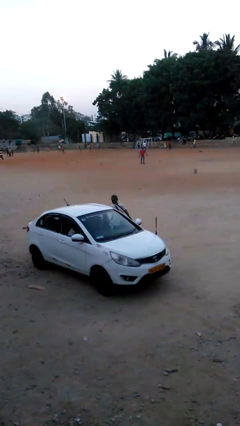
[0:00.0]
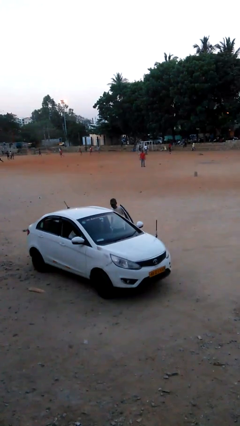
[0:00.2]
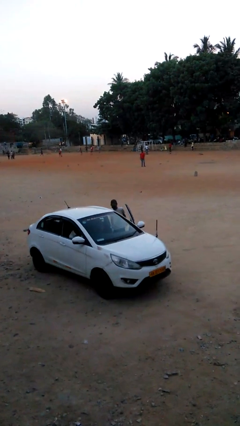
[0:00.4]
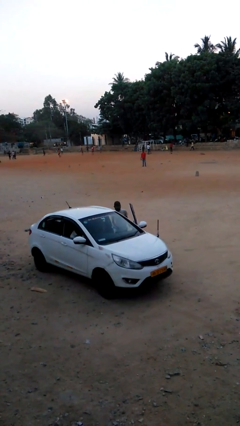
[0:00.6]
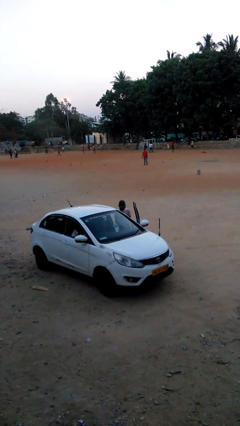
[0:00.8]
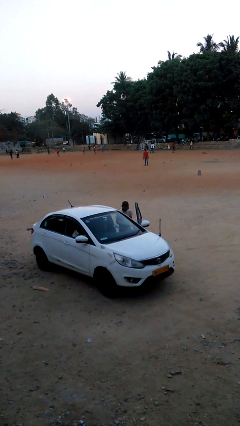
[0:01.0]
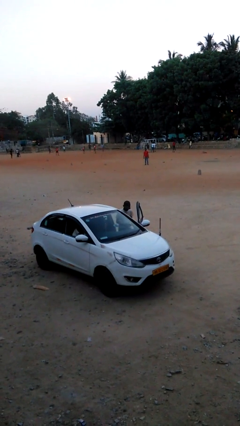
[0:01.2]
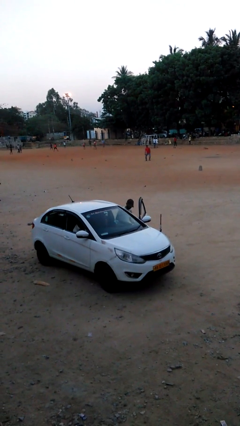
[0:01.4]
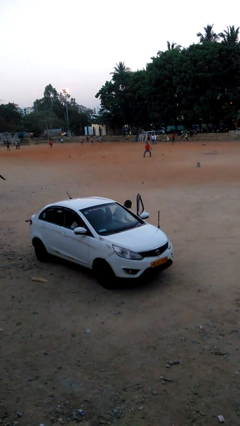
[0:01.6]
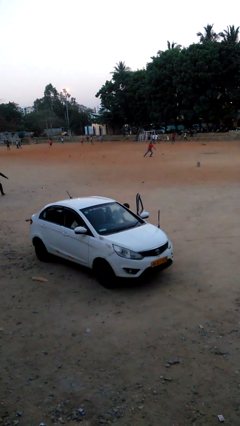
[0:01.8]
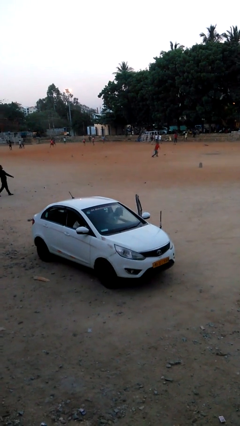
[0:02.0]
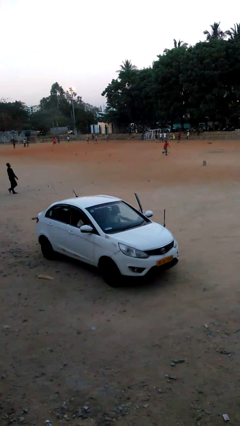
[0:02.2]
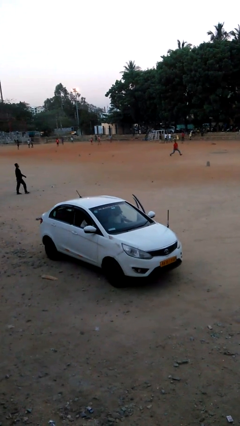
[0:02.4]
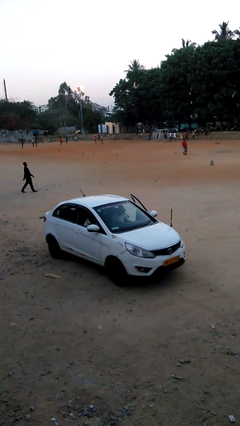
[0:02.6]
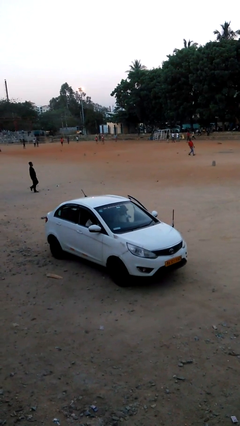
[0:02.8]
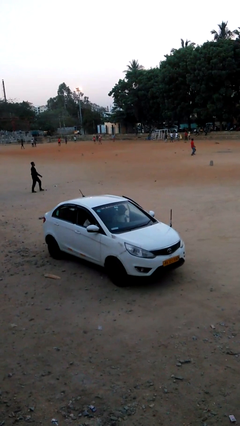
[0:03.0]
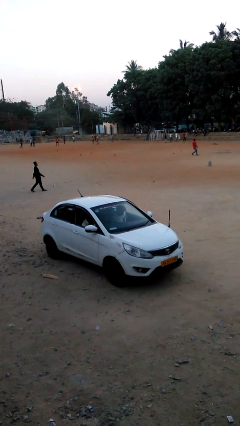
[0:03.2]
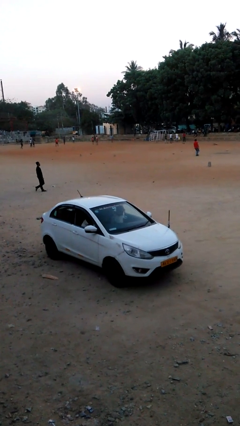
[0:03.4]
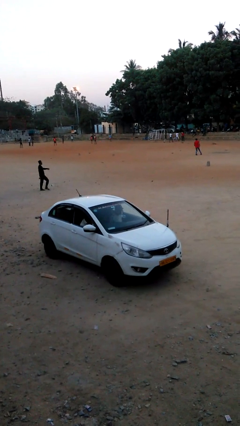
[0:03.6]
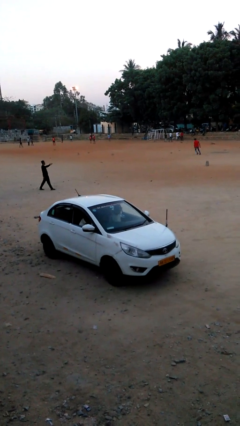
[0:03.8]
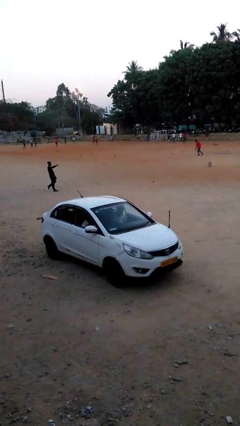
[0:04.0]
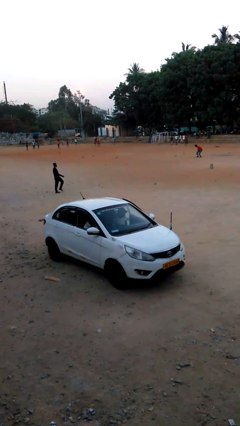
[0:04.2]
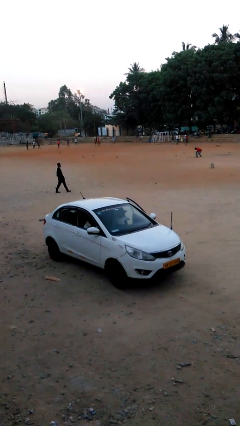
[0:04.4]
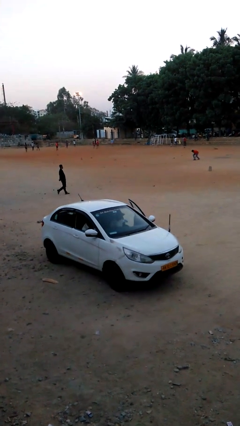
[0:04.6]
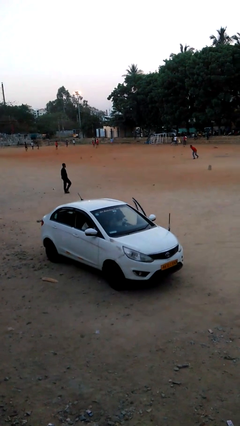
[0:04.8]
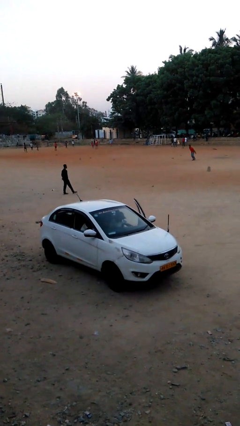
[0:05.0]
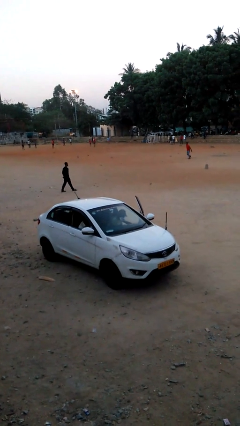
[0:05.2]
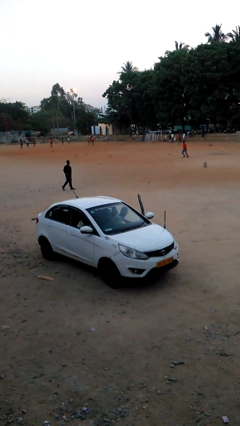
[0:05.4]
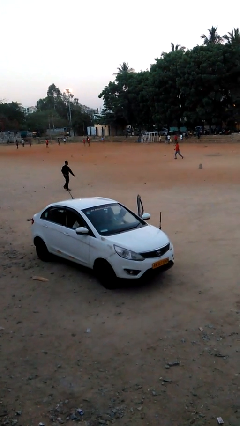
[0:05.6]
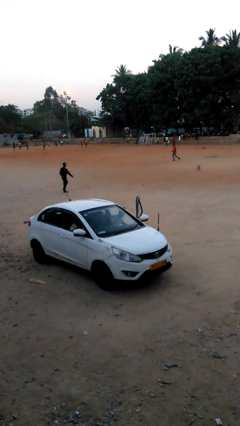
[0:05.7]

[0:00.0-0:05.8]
person enters car

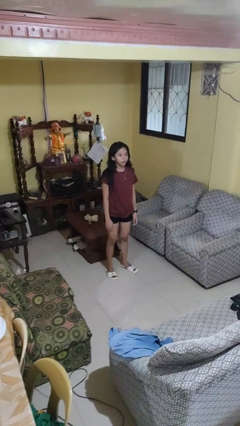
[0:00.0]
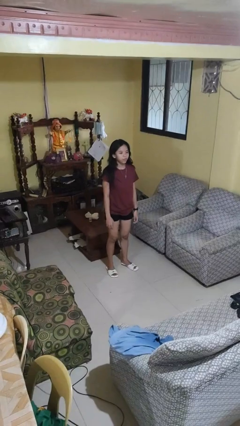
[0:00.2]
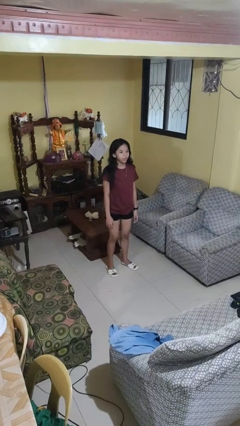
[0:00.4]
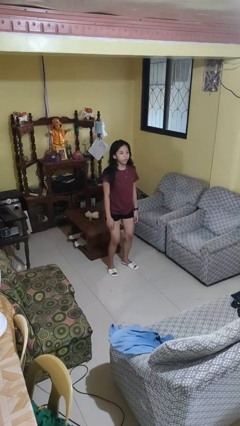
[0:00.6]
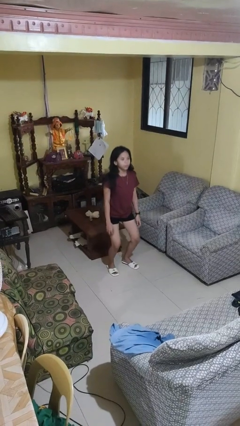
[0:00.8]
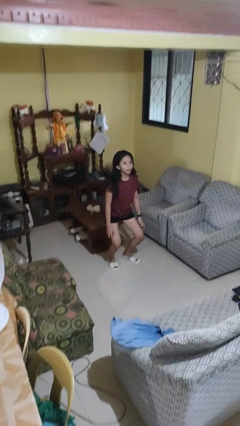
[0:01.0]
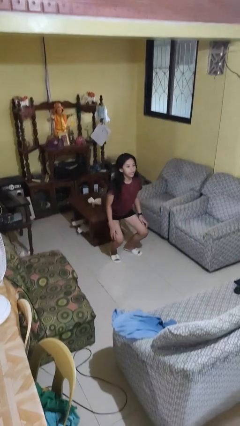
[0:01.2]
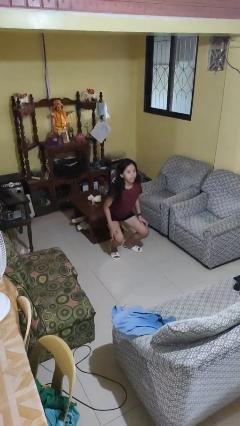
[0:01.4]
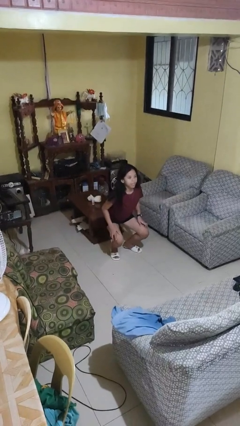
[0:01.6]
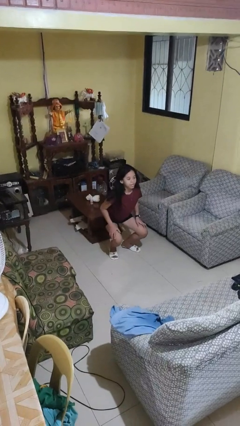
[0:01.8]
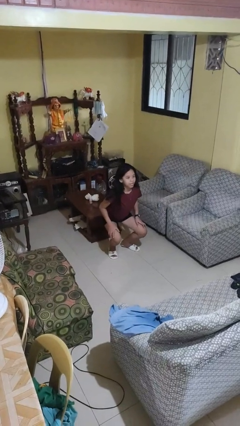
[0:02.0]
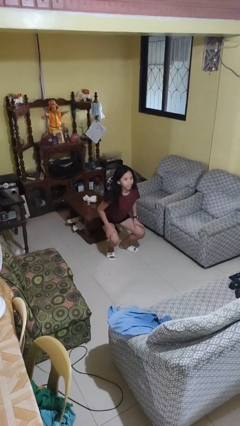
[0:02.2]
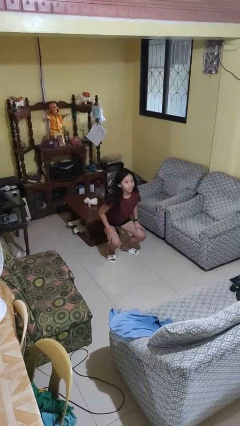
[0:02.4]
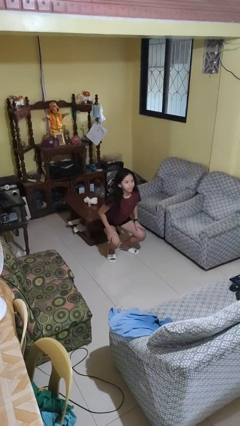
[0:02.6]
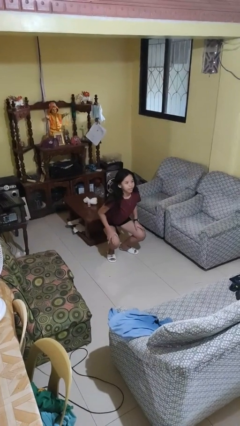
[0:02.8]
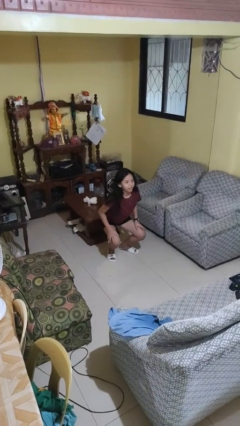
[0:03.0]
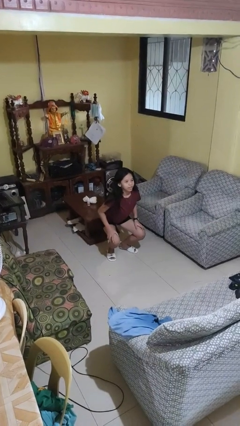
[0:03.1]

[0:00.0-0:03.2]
person squats

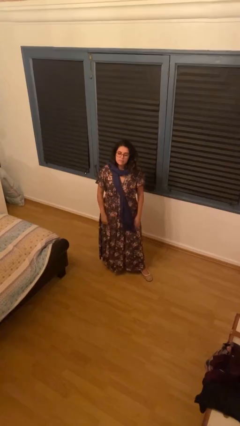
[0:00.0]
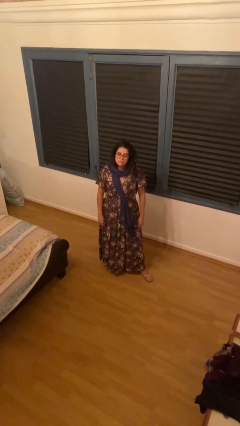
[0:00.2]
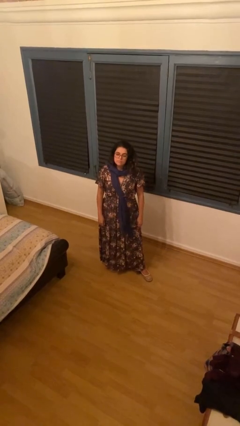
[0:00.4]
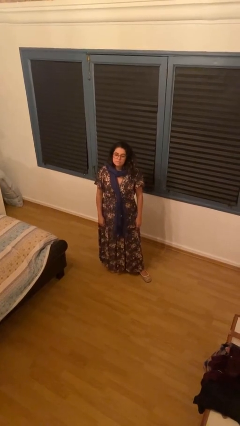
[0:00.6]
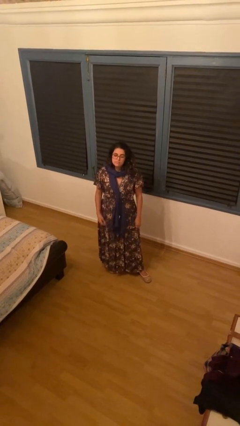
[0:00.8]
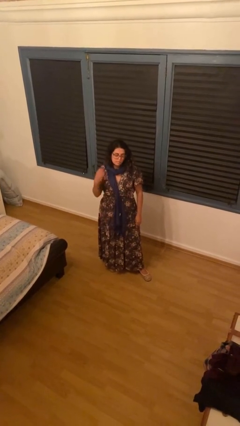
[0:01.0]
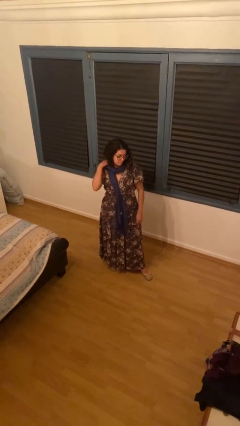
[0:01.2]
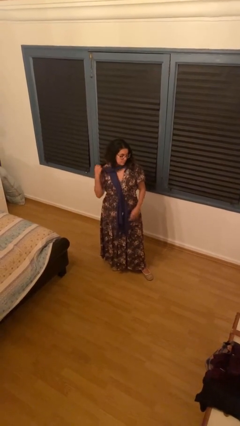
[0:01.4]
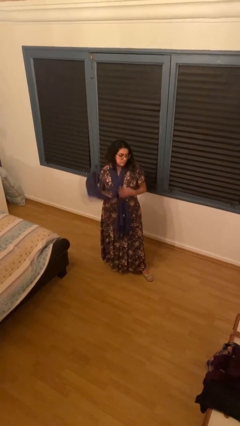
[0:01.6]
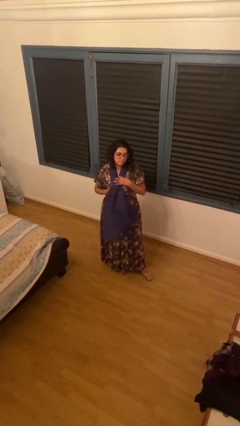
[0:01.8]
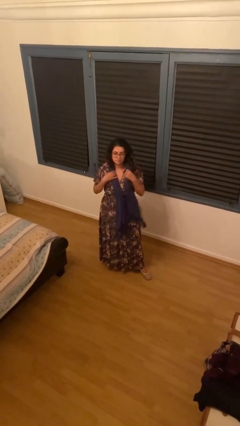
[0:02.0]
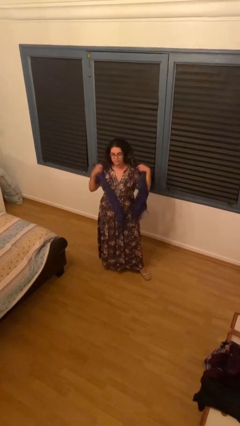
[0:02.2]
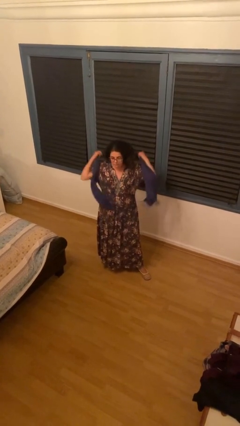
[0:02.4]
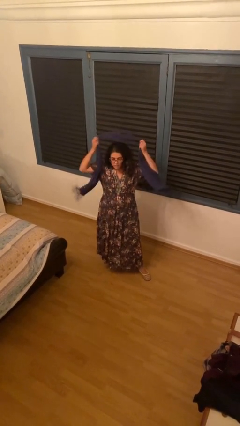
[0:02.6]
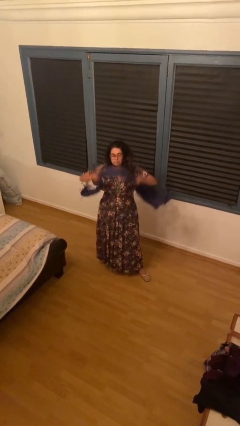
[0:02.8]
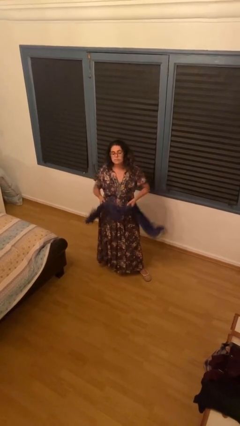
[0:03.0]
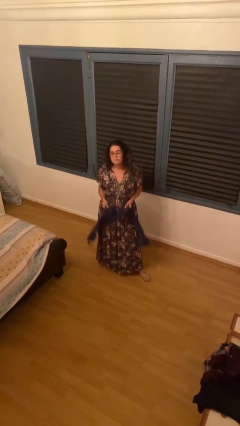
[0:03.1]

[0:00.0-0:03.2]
person takes off scarf

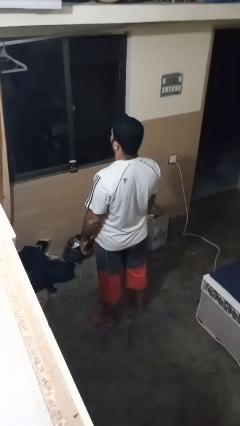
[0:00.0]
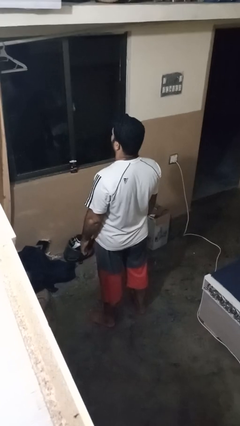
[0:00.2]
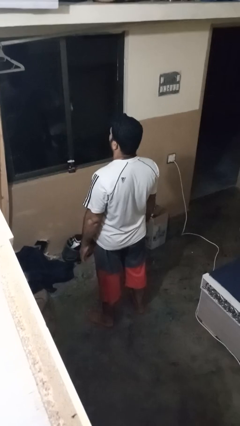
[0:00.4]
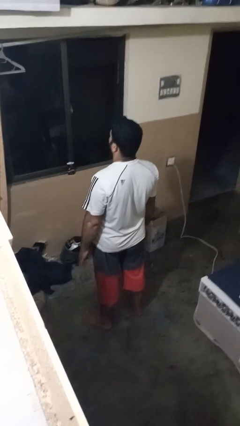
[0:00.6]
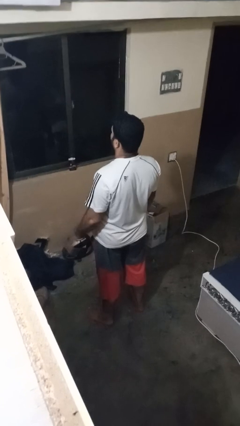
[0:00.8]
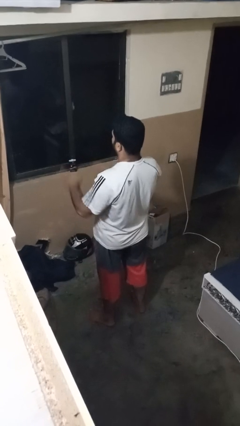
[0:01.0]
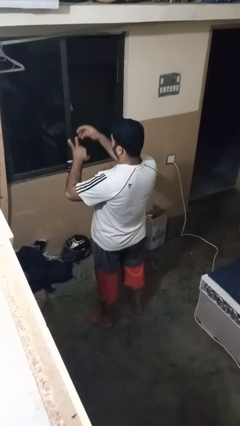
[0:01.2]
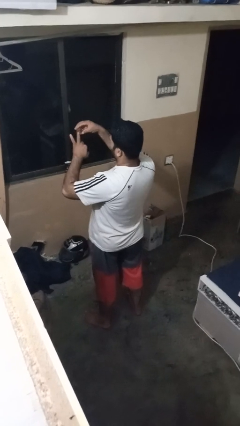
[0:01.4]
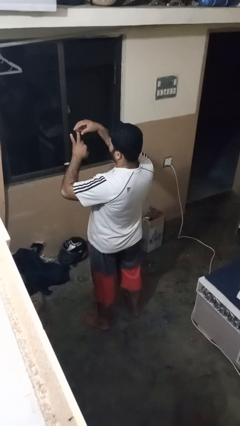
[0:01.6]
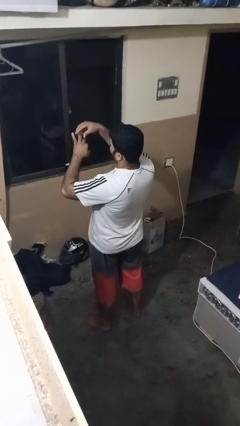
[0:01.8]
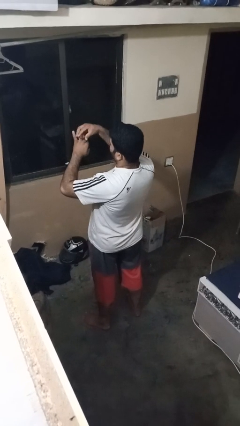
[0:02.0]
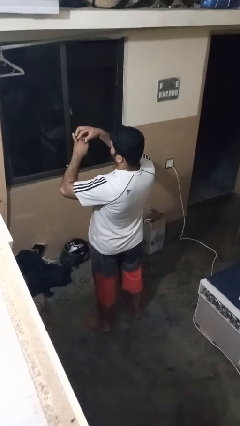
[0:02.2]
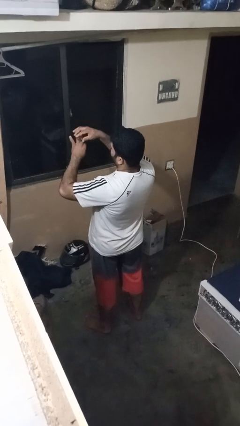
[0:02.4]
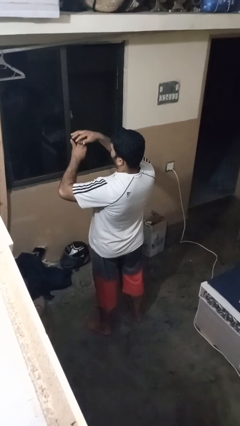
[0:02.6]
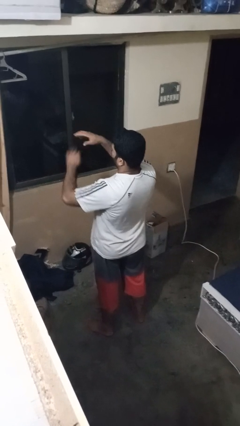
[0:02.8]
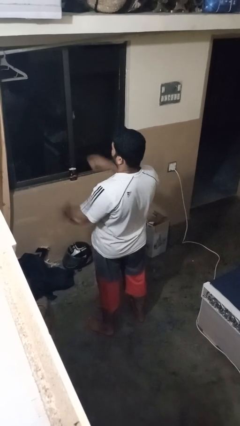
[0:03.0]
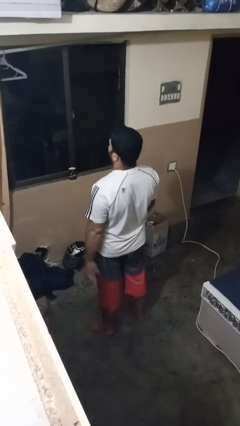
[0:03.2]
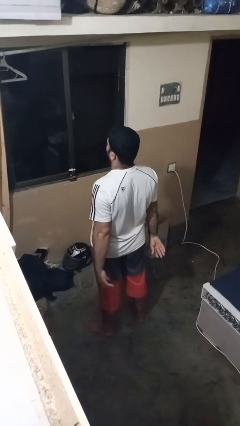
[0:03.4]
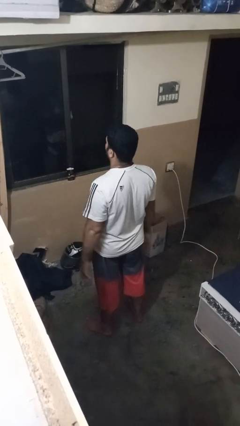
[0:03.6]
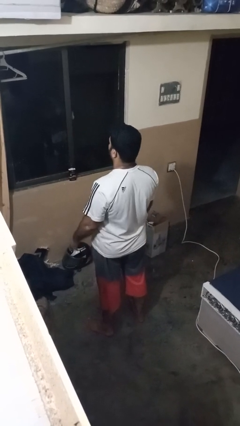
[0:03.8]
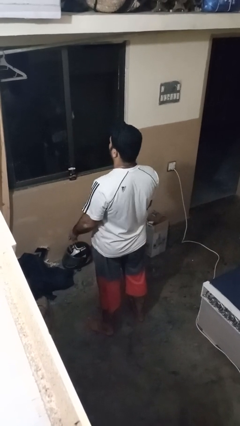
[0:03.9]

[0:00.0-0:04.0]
person puts on ring

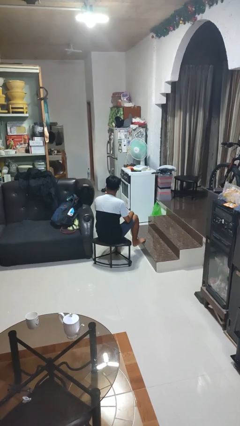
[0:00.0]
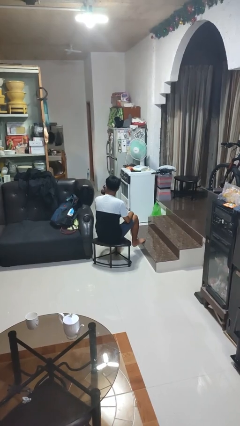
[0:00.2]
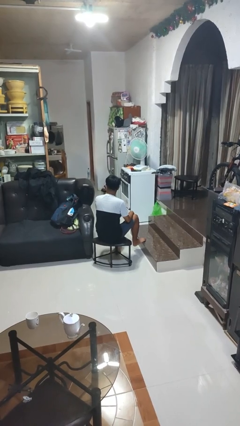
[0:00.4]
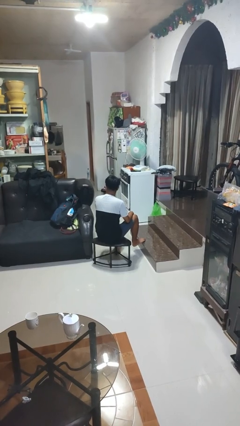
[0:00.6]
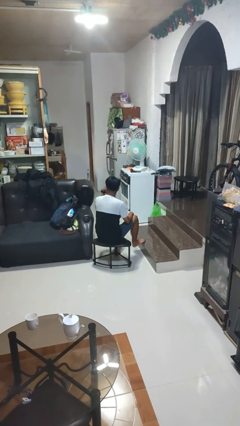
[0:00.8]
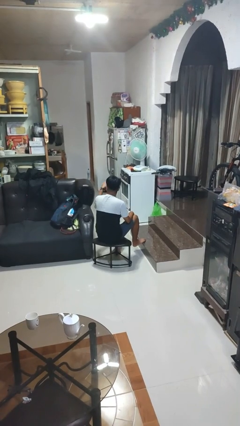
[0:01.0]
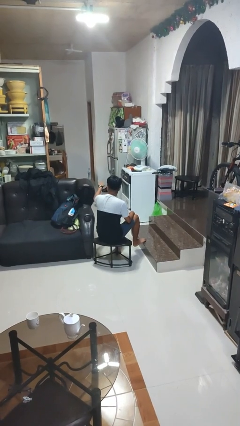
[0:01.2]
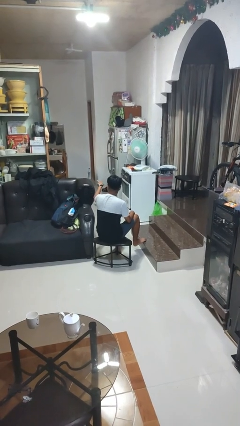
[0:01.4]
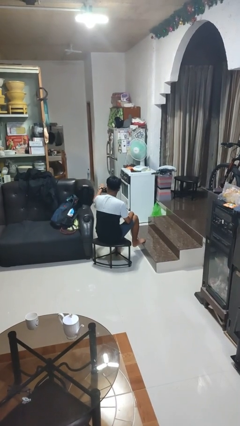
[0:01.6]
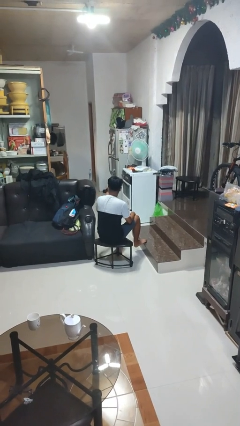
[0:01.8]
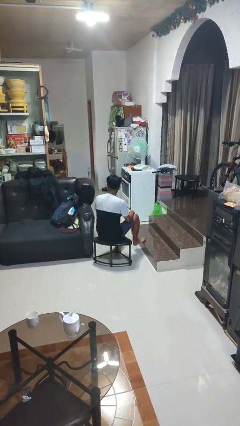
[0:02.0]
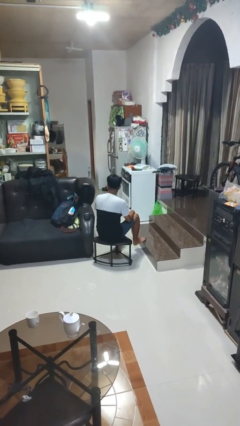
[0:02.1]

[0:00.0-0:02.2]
person gestures watch closely
